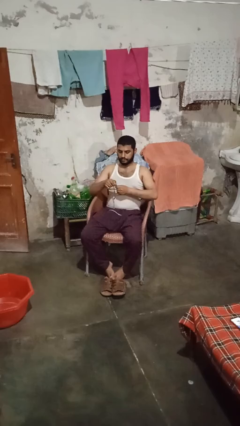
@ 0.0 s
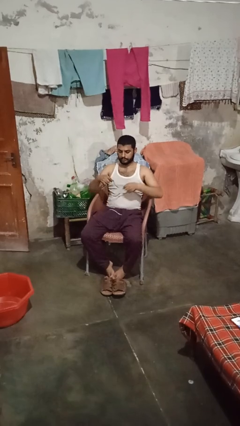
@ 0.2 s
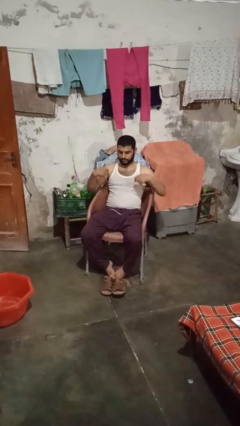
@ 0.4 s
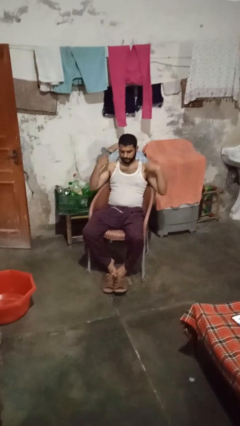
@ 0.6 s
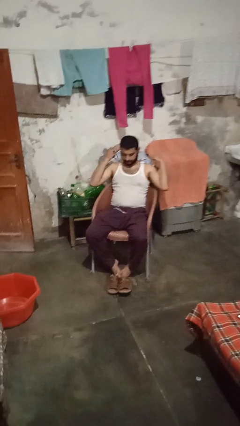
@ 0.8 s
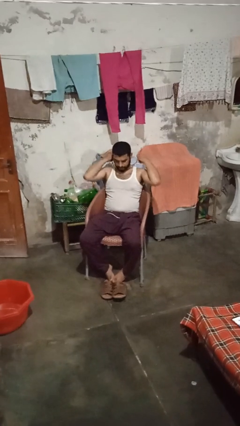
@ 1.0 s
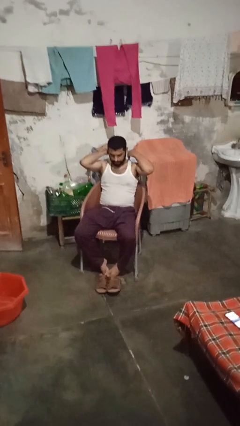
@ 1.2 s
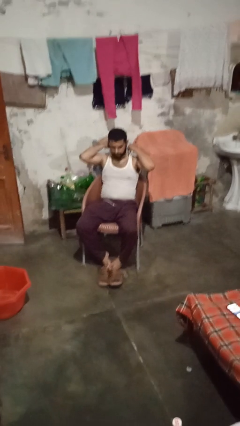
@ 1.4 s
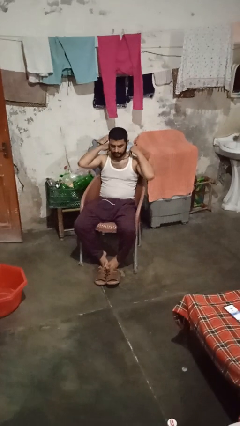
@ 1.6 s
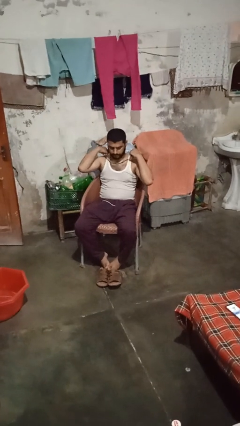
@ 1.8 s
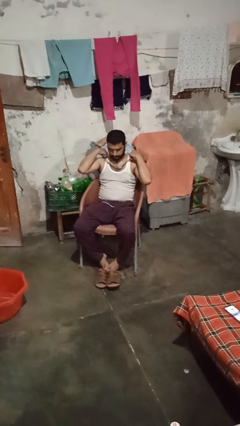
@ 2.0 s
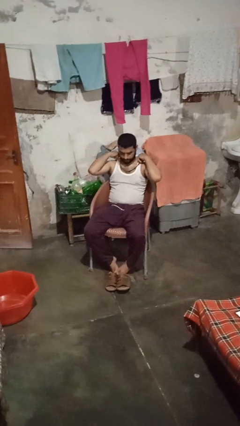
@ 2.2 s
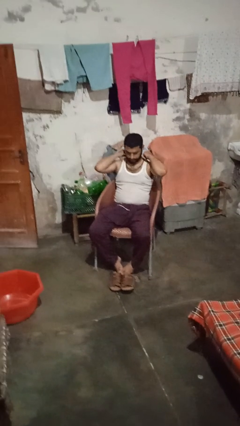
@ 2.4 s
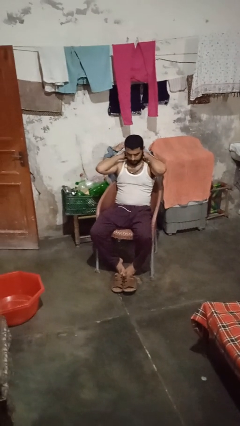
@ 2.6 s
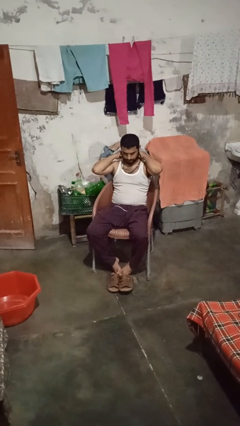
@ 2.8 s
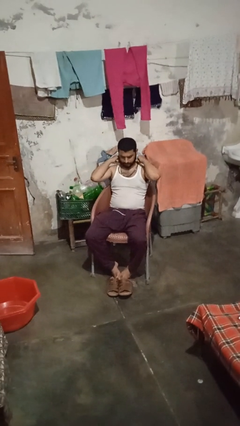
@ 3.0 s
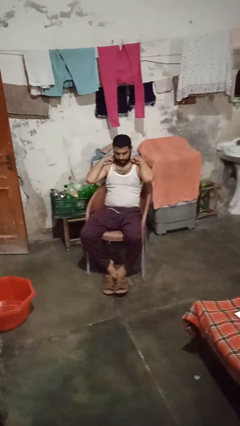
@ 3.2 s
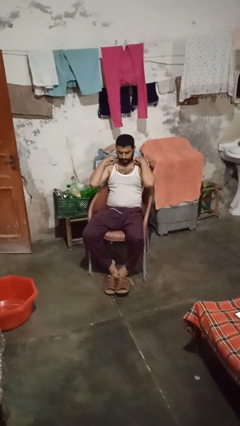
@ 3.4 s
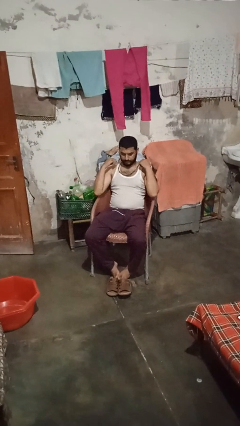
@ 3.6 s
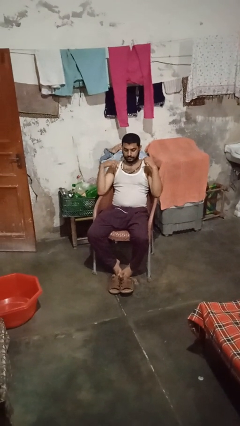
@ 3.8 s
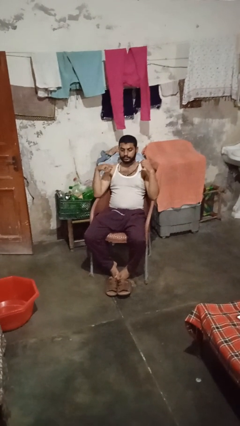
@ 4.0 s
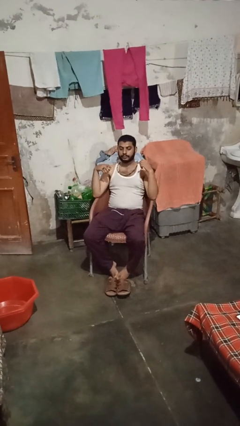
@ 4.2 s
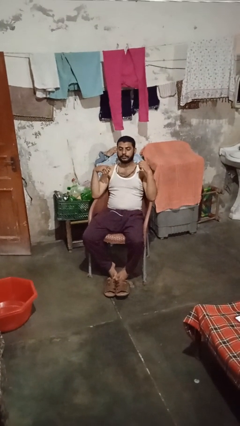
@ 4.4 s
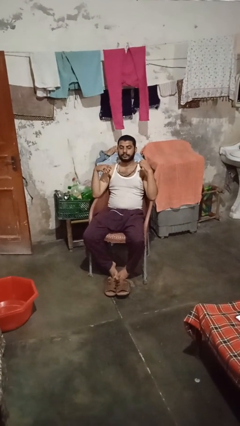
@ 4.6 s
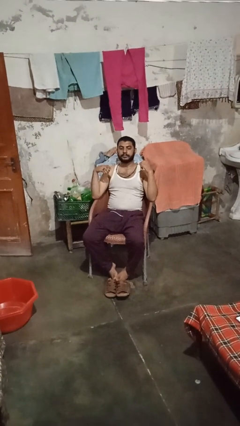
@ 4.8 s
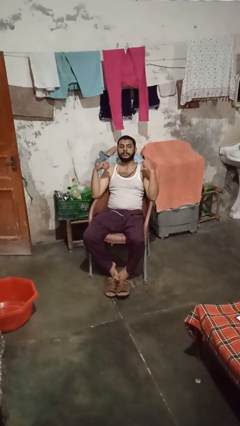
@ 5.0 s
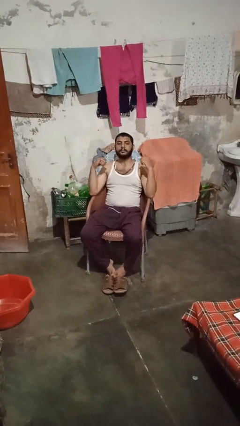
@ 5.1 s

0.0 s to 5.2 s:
person puts on necklace

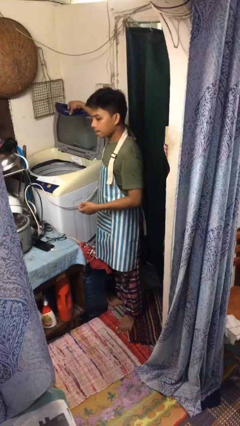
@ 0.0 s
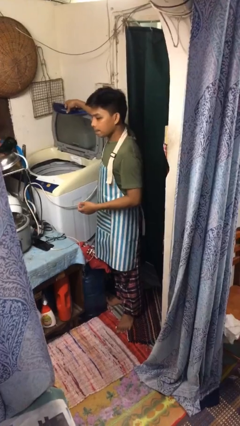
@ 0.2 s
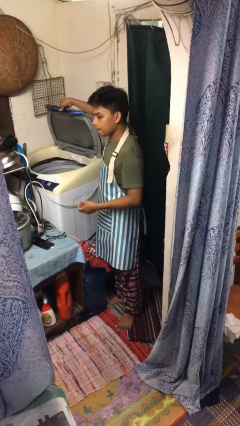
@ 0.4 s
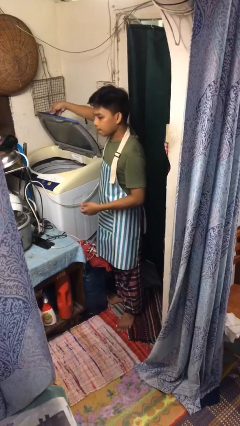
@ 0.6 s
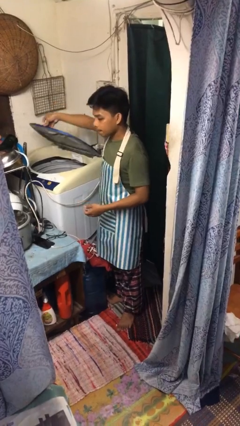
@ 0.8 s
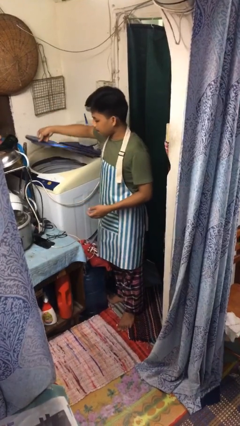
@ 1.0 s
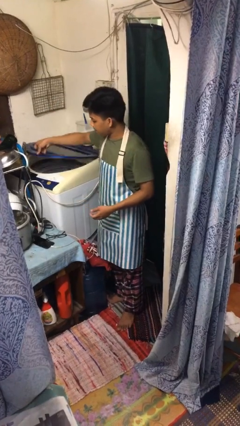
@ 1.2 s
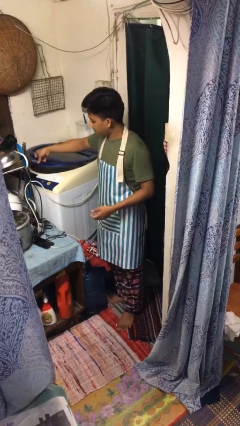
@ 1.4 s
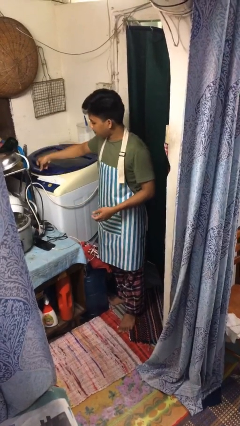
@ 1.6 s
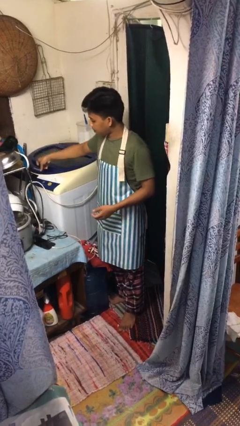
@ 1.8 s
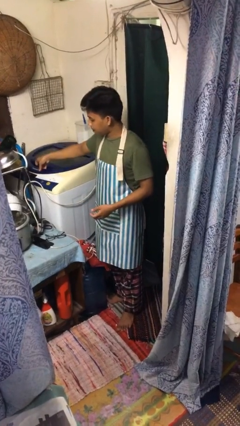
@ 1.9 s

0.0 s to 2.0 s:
person closes clothes washer

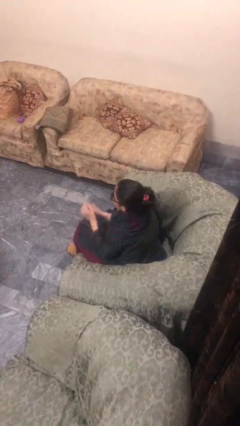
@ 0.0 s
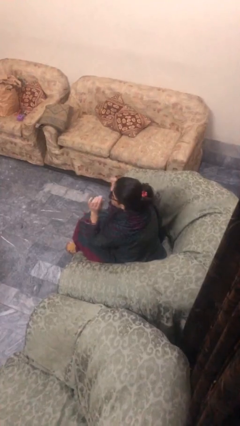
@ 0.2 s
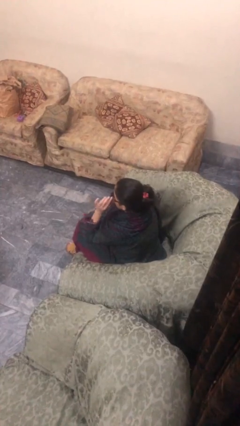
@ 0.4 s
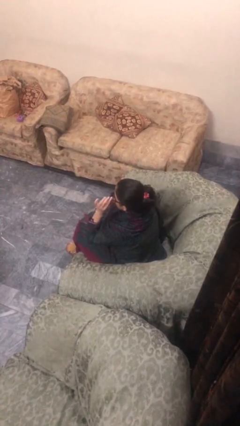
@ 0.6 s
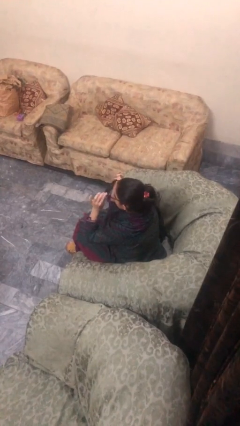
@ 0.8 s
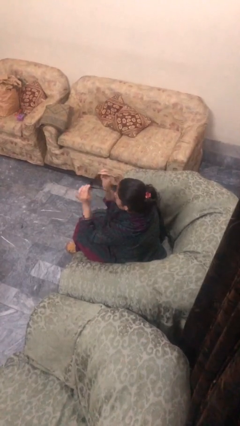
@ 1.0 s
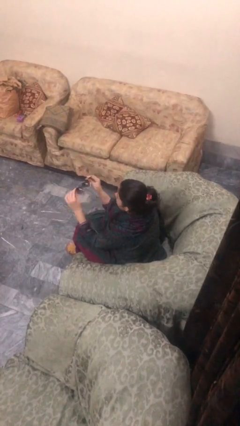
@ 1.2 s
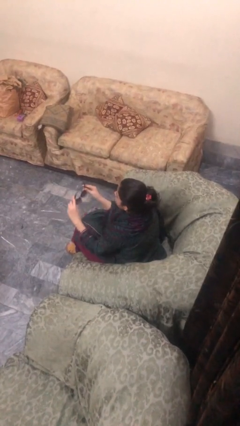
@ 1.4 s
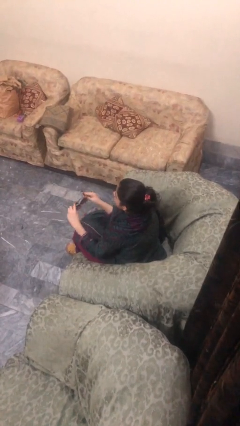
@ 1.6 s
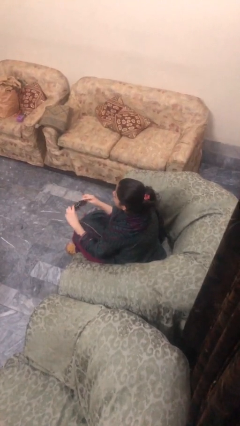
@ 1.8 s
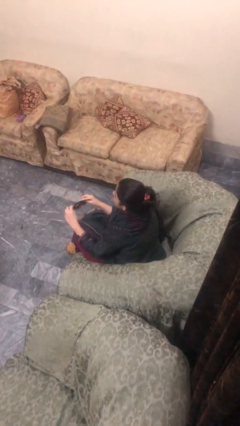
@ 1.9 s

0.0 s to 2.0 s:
person takes off sunglasses

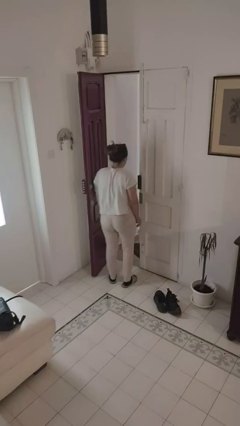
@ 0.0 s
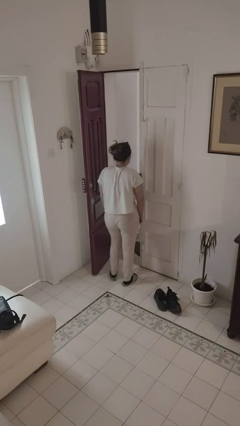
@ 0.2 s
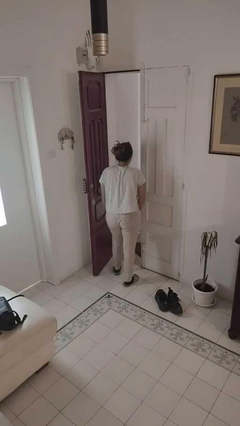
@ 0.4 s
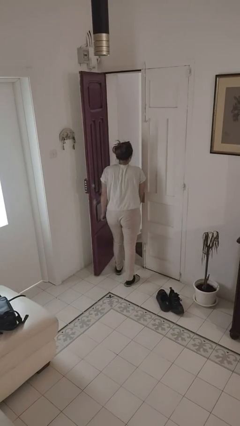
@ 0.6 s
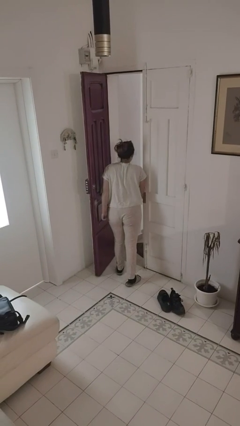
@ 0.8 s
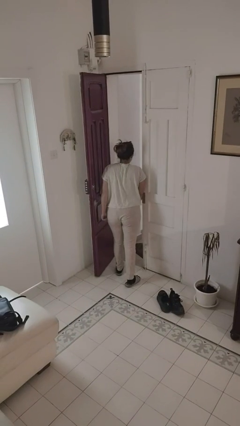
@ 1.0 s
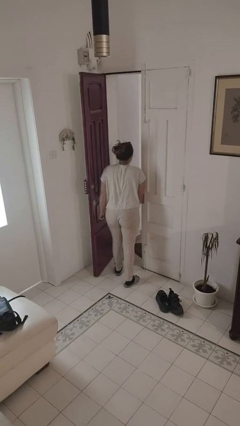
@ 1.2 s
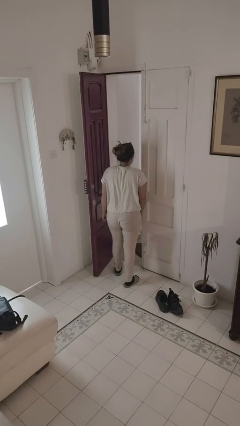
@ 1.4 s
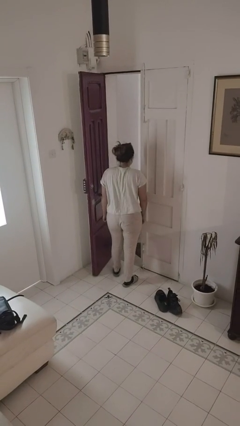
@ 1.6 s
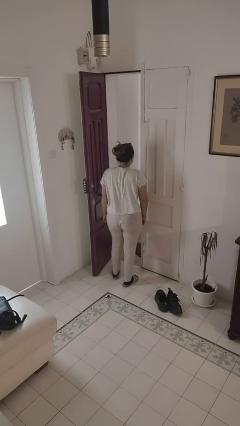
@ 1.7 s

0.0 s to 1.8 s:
person bumps into wall

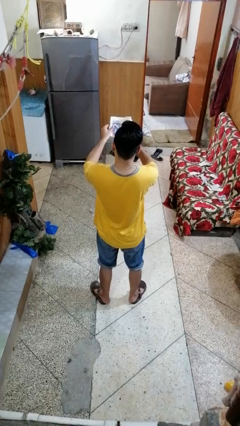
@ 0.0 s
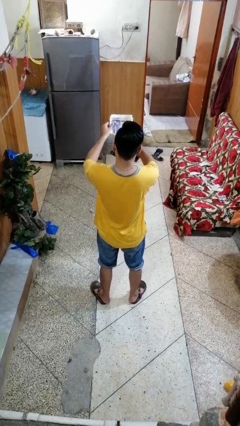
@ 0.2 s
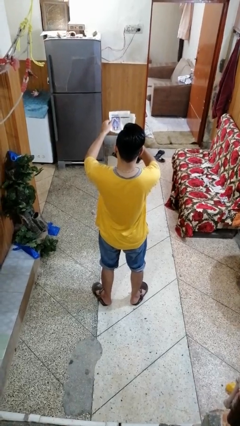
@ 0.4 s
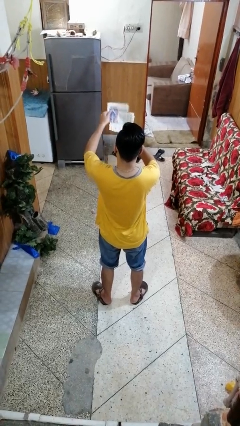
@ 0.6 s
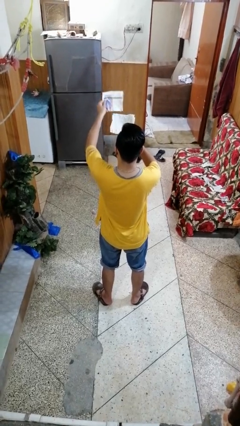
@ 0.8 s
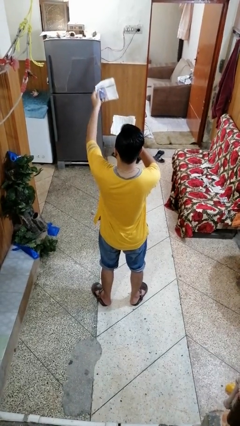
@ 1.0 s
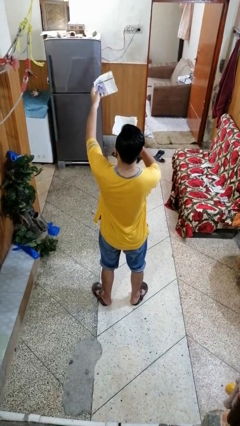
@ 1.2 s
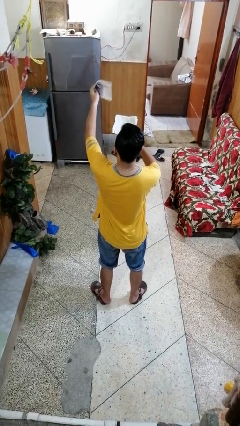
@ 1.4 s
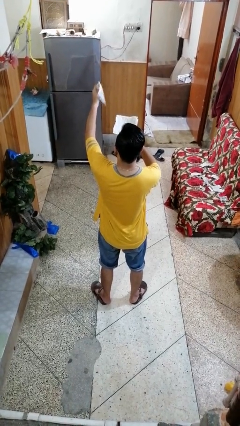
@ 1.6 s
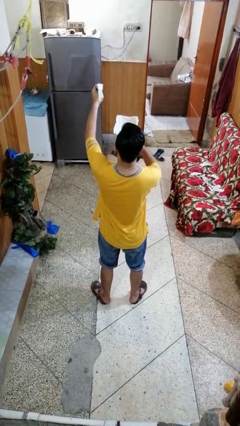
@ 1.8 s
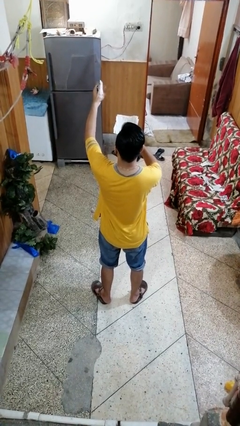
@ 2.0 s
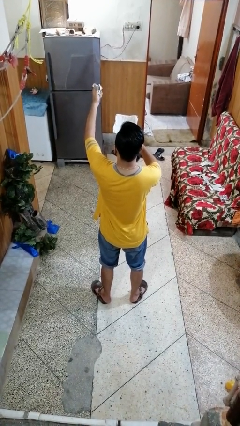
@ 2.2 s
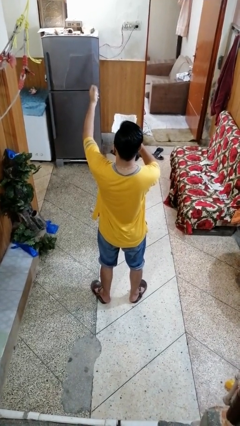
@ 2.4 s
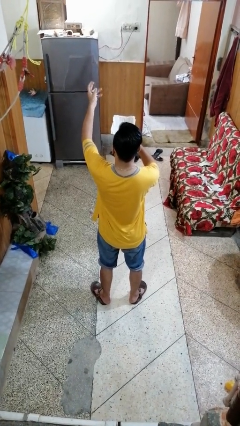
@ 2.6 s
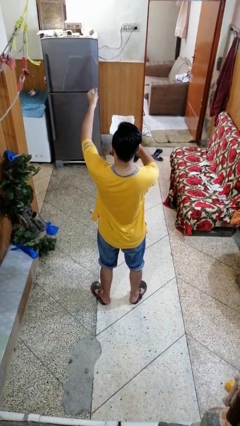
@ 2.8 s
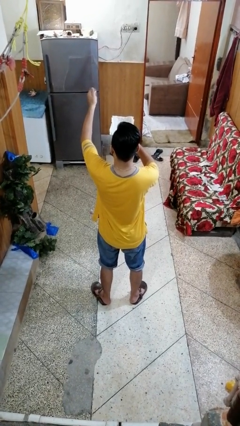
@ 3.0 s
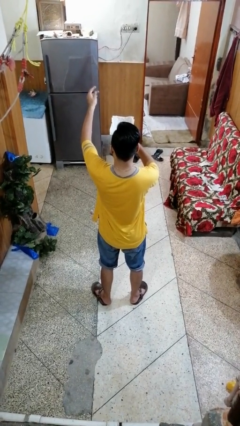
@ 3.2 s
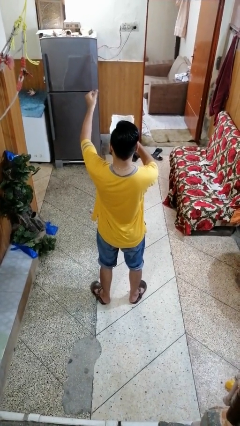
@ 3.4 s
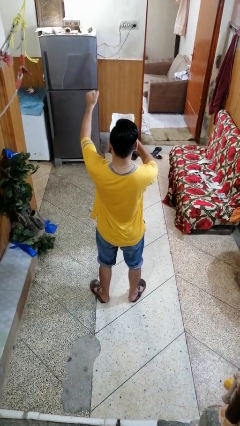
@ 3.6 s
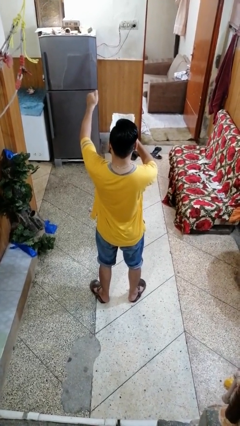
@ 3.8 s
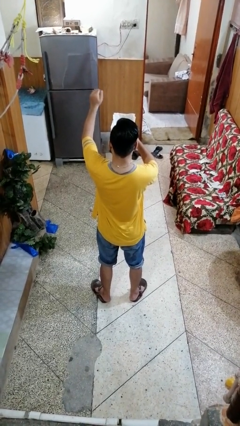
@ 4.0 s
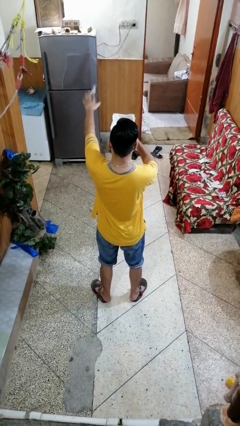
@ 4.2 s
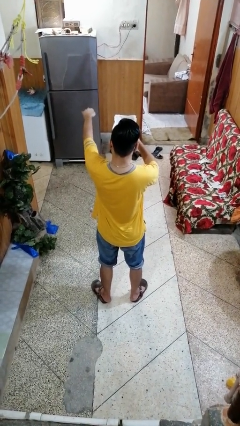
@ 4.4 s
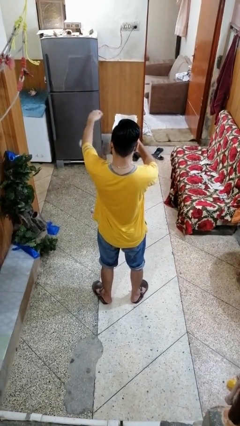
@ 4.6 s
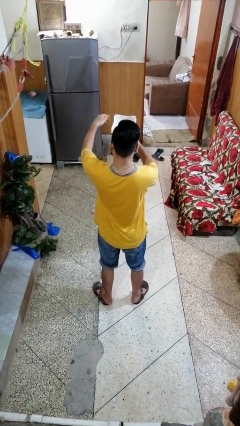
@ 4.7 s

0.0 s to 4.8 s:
person crumples paper

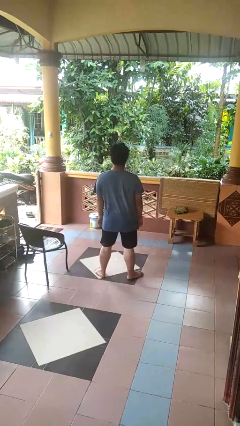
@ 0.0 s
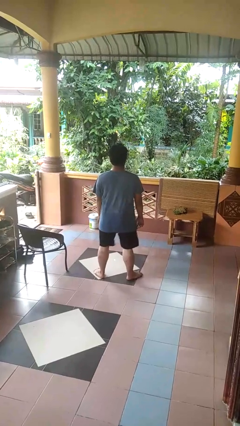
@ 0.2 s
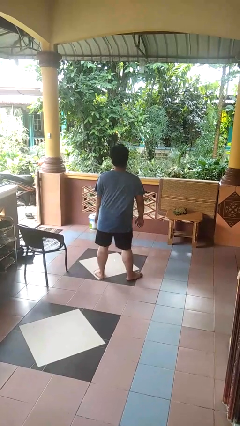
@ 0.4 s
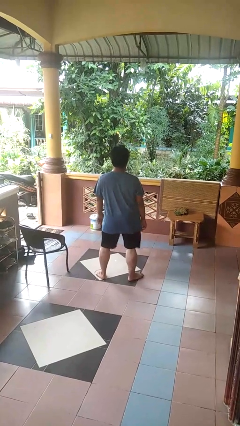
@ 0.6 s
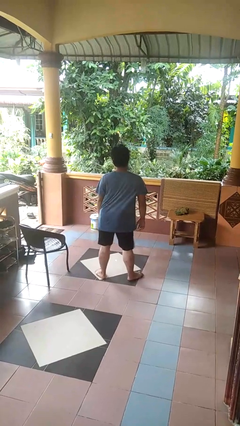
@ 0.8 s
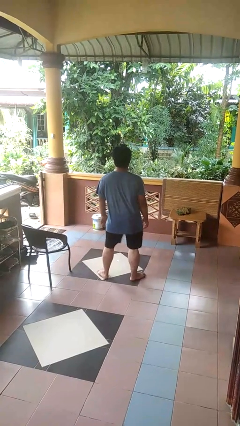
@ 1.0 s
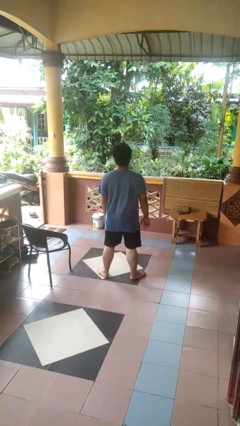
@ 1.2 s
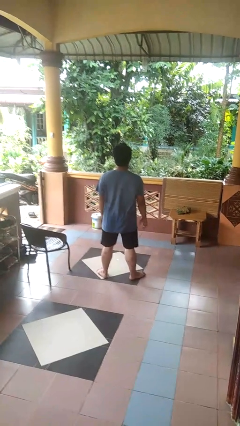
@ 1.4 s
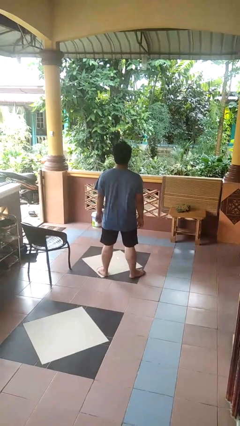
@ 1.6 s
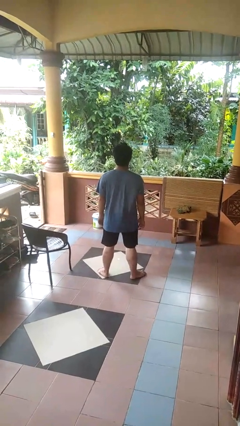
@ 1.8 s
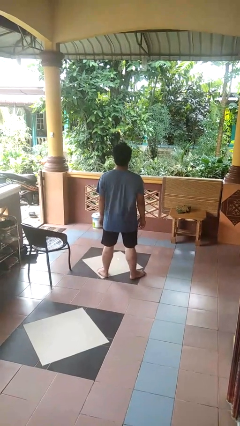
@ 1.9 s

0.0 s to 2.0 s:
person wiggles hips

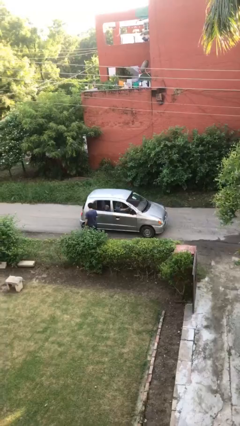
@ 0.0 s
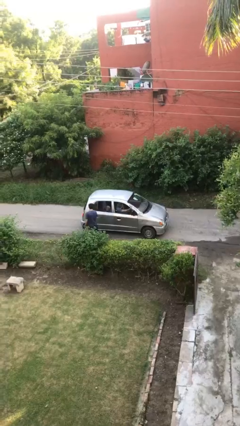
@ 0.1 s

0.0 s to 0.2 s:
car picks up person
